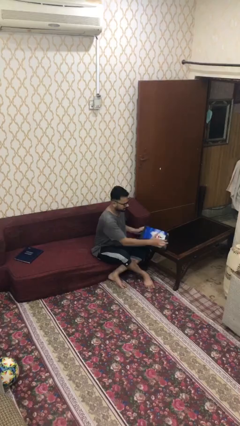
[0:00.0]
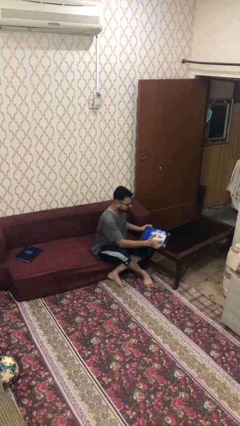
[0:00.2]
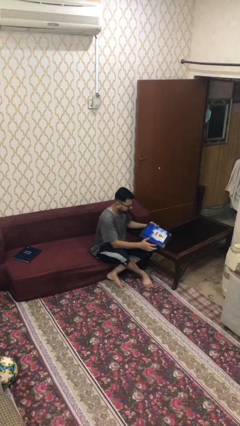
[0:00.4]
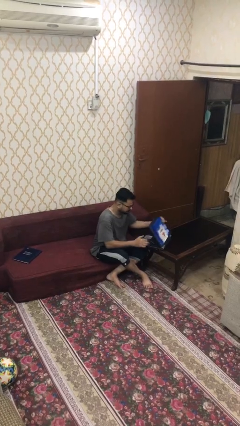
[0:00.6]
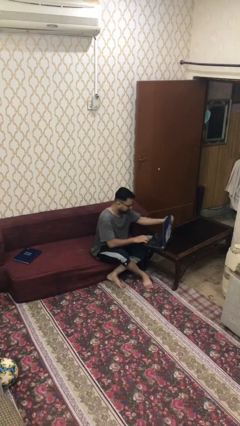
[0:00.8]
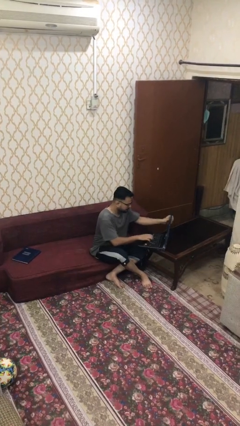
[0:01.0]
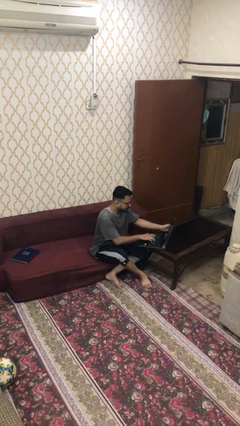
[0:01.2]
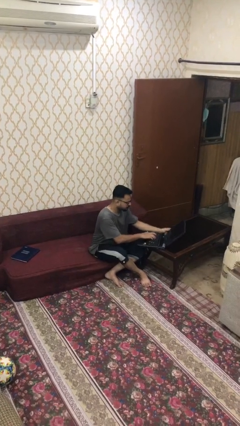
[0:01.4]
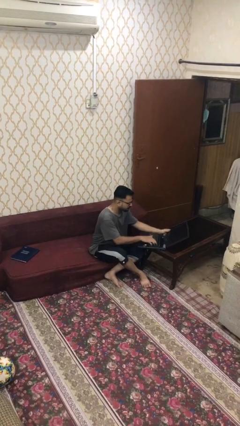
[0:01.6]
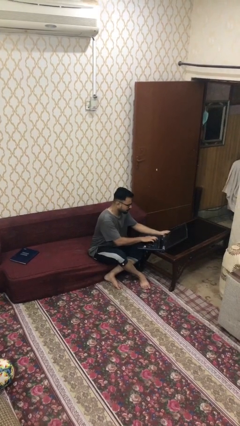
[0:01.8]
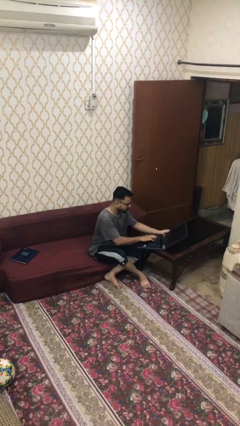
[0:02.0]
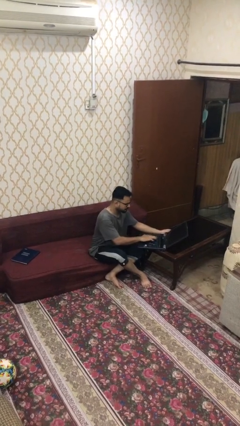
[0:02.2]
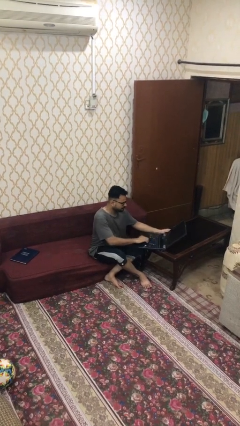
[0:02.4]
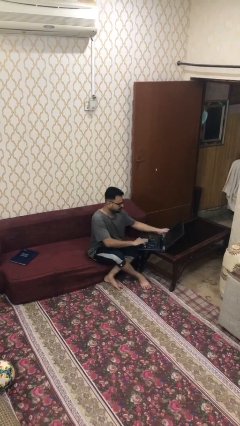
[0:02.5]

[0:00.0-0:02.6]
person interacts with laptop

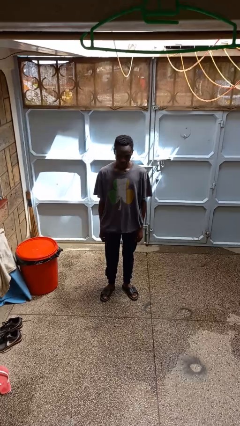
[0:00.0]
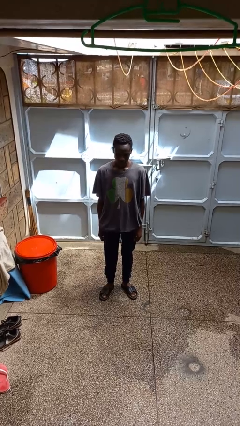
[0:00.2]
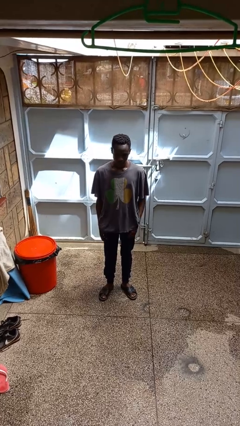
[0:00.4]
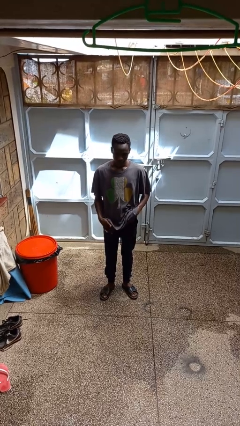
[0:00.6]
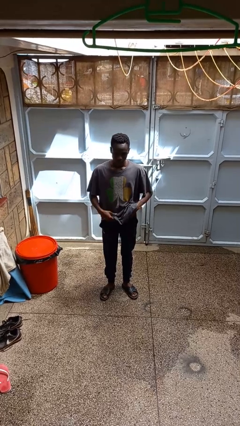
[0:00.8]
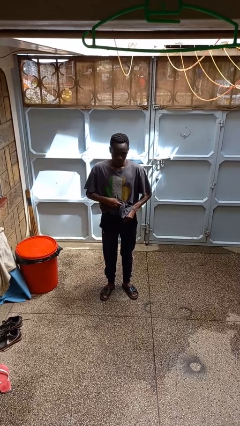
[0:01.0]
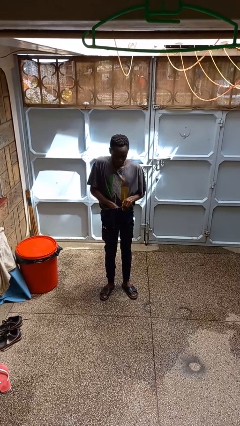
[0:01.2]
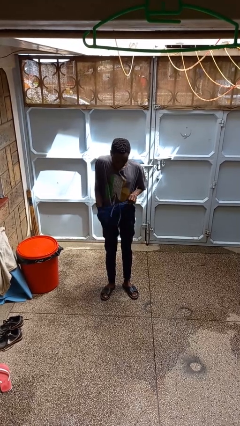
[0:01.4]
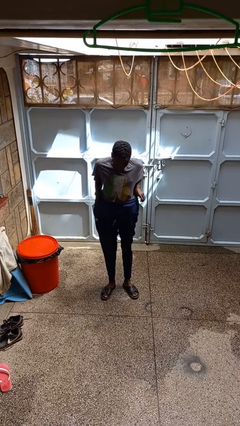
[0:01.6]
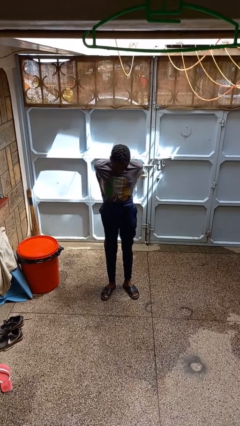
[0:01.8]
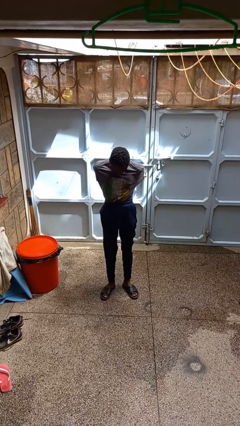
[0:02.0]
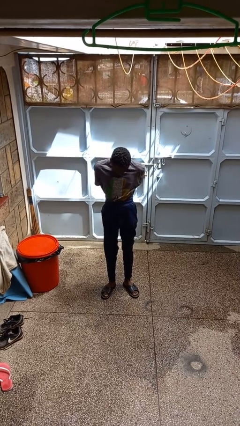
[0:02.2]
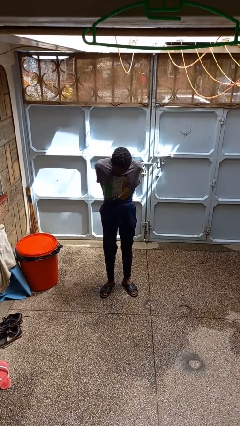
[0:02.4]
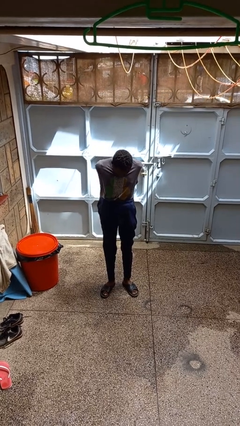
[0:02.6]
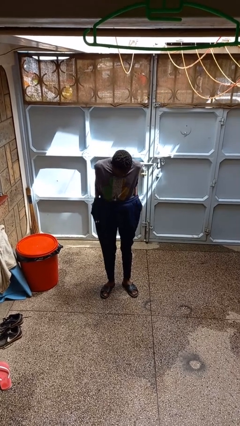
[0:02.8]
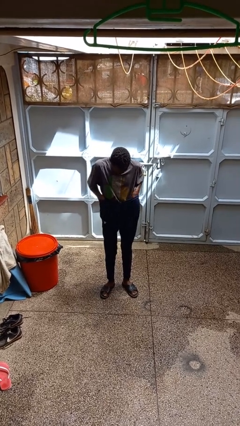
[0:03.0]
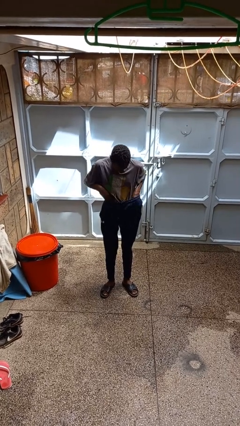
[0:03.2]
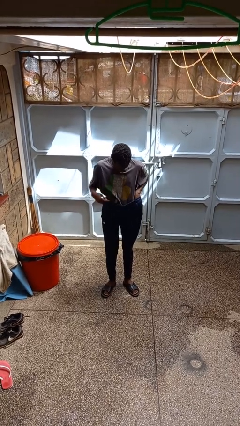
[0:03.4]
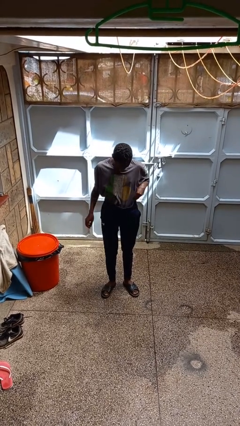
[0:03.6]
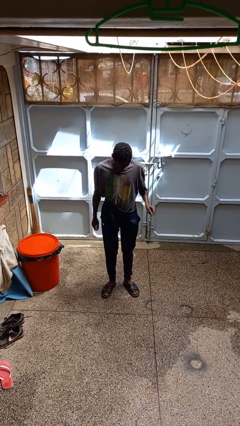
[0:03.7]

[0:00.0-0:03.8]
person tucks in shirt

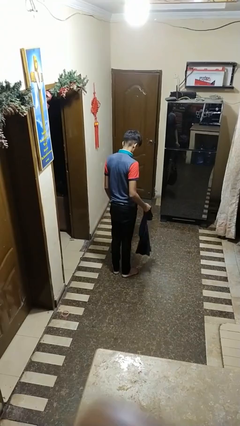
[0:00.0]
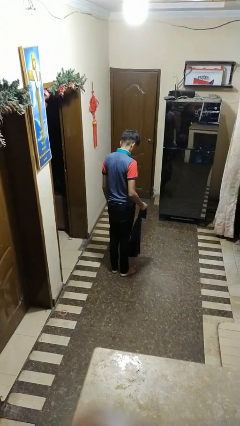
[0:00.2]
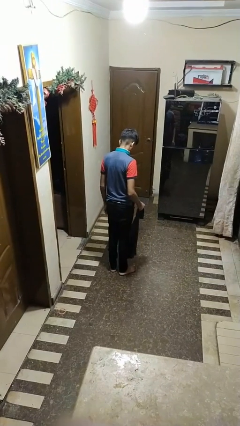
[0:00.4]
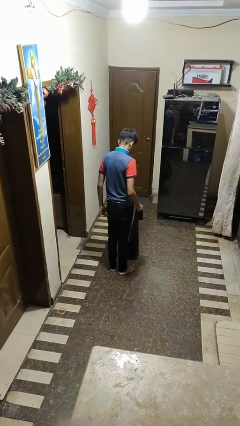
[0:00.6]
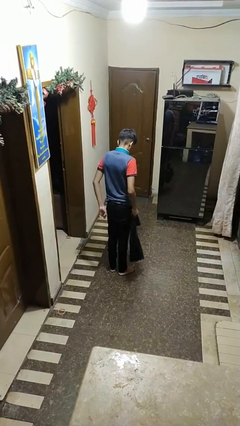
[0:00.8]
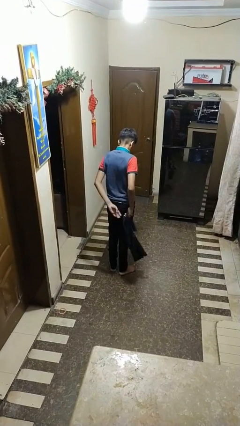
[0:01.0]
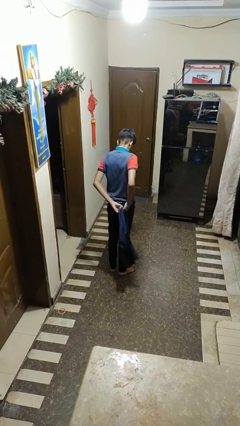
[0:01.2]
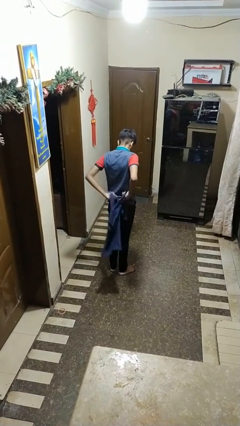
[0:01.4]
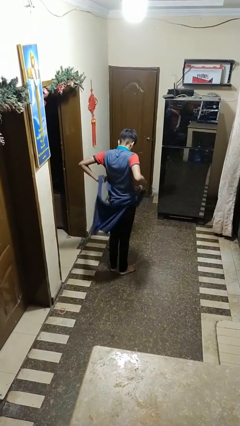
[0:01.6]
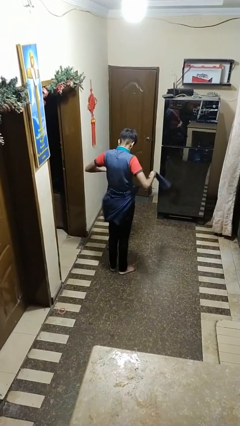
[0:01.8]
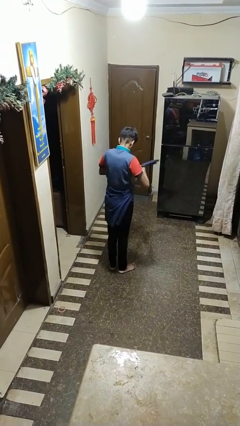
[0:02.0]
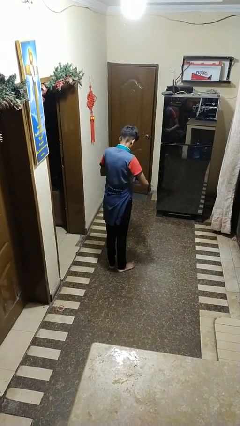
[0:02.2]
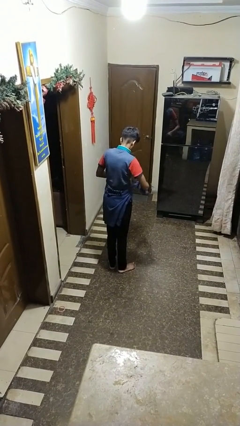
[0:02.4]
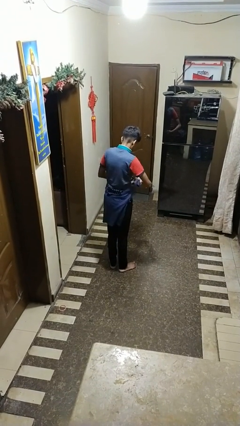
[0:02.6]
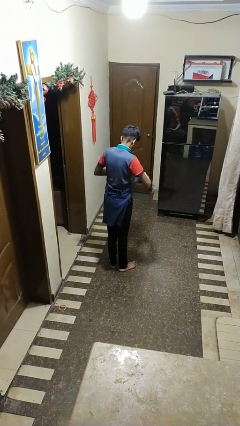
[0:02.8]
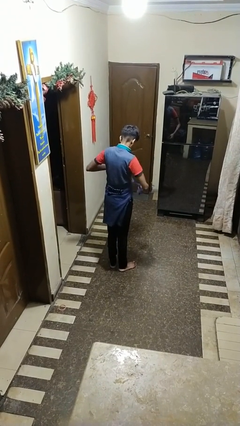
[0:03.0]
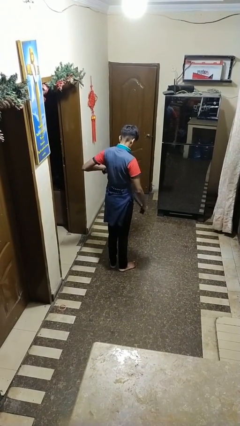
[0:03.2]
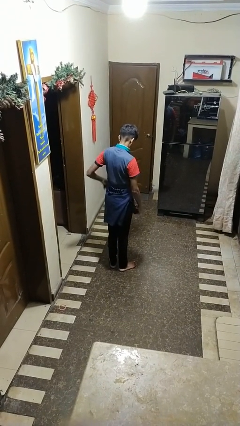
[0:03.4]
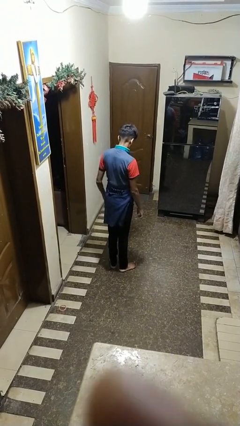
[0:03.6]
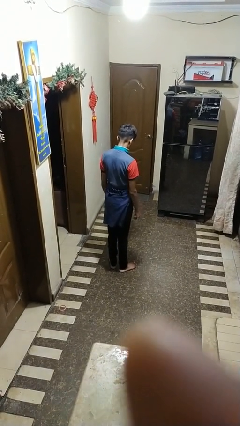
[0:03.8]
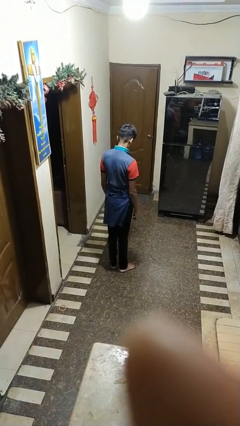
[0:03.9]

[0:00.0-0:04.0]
person ties jacket around waist

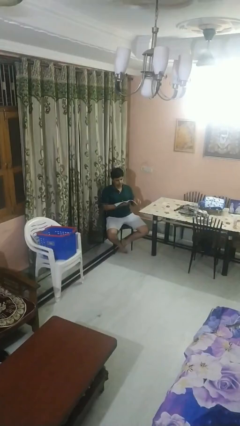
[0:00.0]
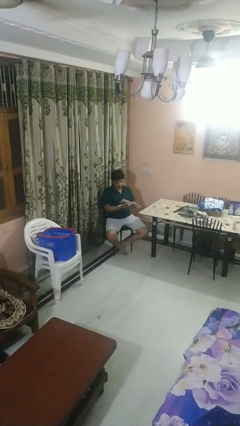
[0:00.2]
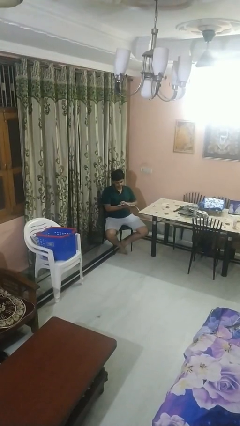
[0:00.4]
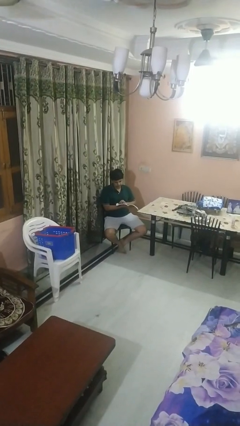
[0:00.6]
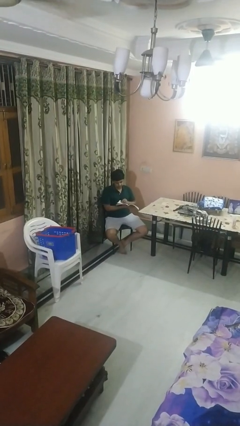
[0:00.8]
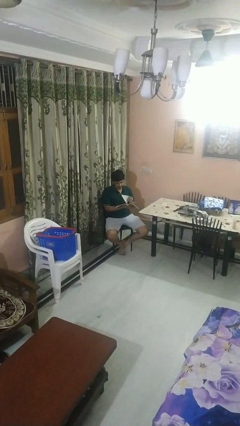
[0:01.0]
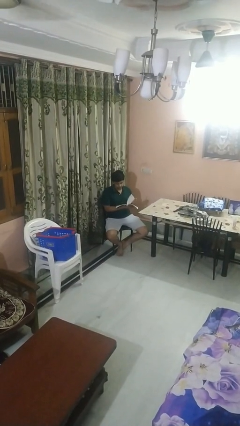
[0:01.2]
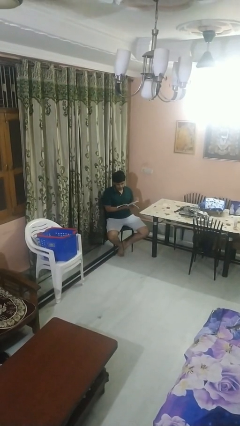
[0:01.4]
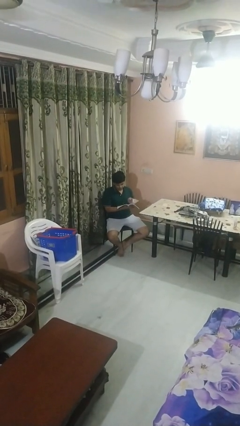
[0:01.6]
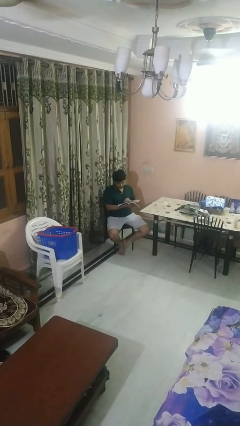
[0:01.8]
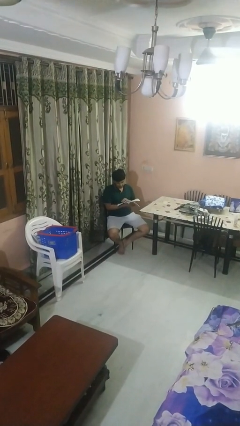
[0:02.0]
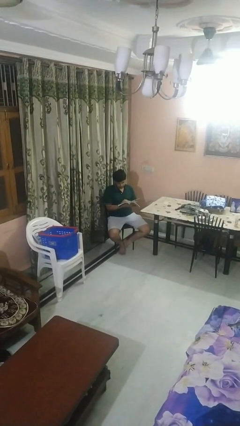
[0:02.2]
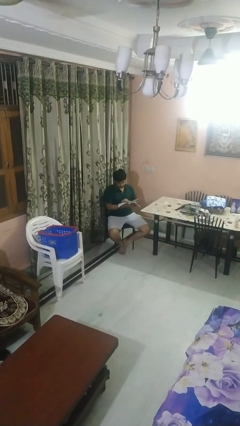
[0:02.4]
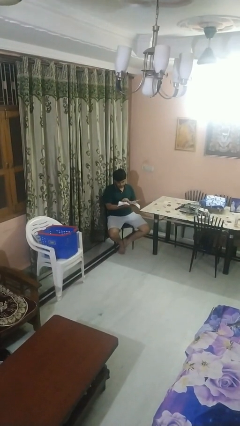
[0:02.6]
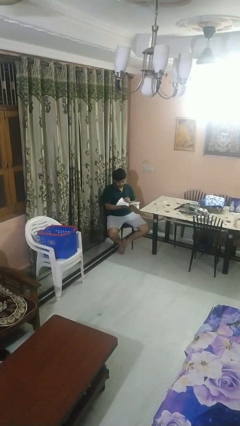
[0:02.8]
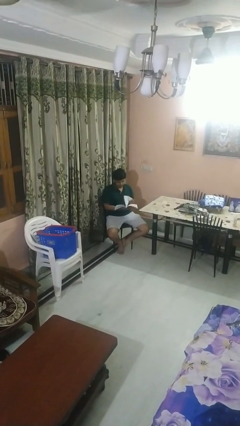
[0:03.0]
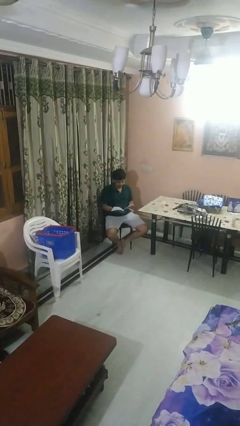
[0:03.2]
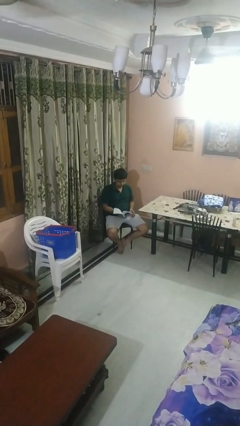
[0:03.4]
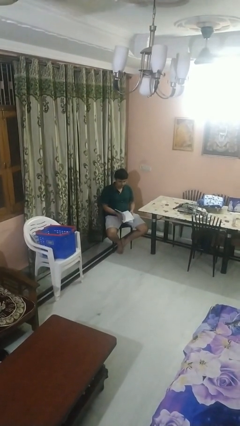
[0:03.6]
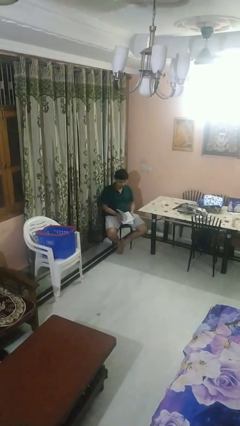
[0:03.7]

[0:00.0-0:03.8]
person reads magazine

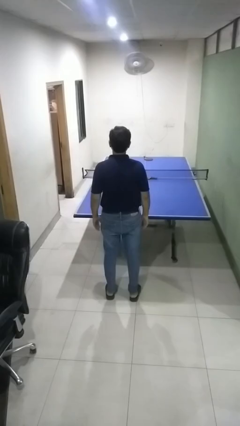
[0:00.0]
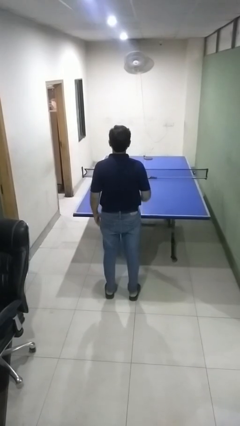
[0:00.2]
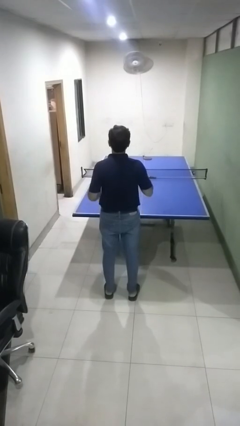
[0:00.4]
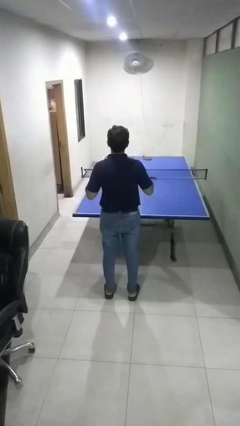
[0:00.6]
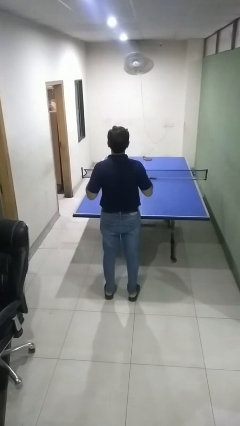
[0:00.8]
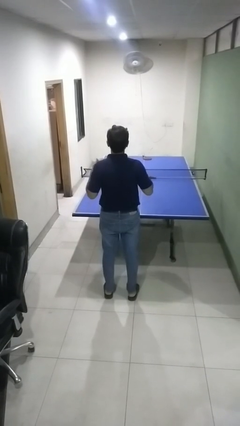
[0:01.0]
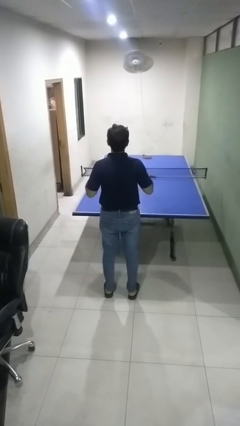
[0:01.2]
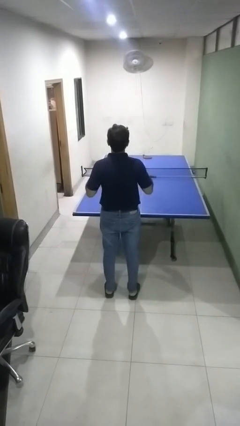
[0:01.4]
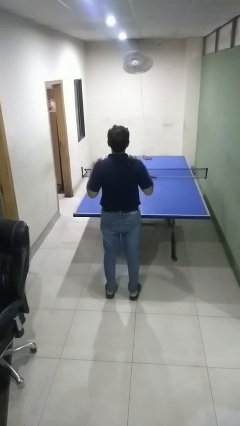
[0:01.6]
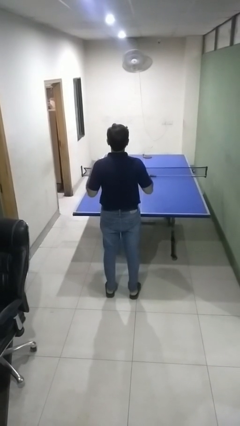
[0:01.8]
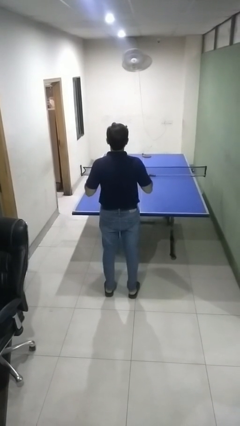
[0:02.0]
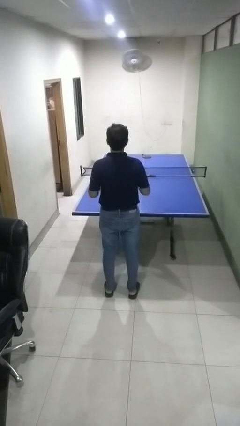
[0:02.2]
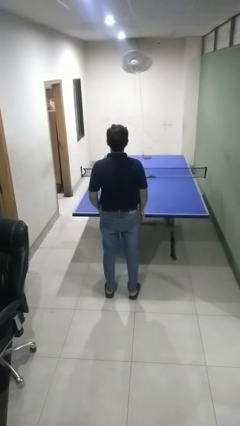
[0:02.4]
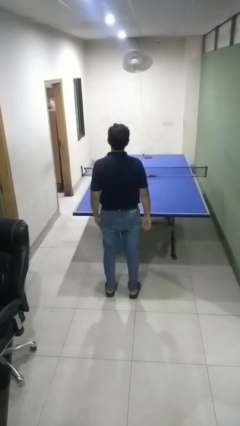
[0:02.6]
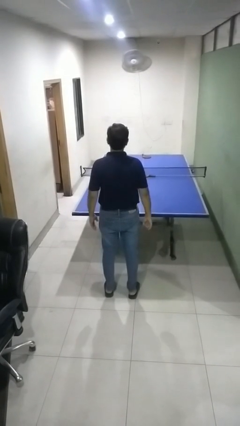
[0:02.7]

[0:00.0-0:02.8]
person drums on chest

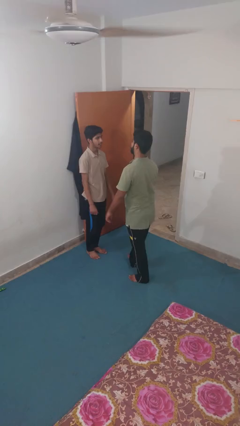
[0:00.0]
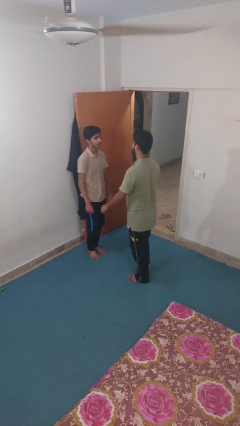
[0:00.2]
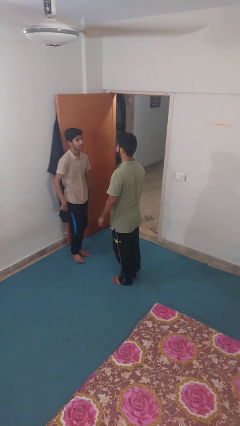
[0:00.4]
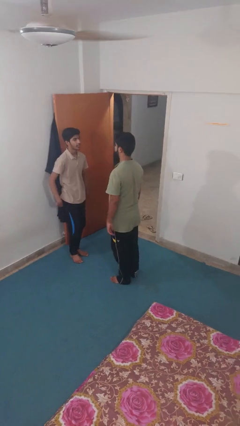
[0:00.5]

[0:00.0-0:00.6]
person puts down person
